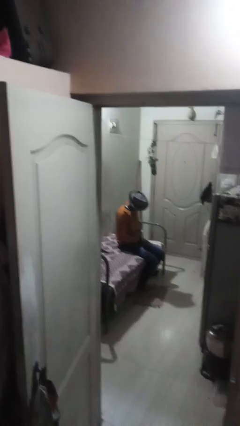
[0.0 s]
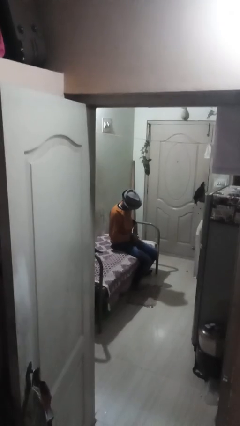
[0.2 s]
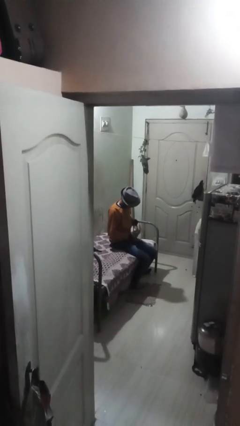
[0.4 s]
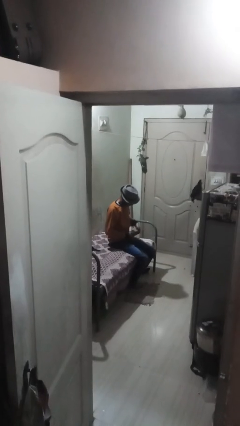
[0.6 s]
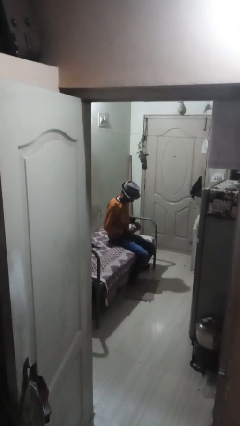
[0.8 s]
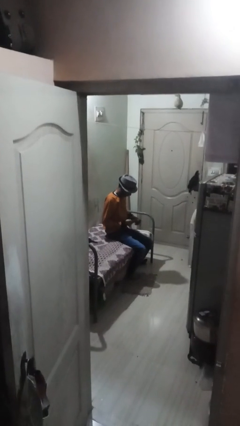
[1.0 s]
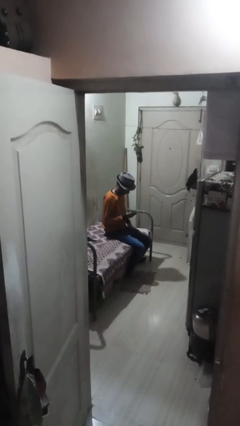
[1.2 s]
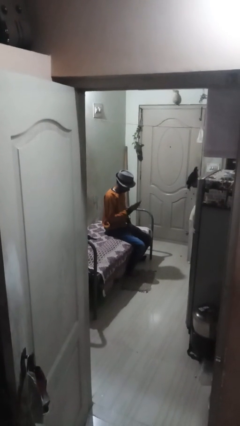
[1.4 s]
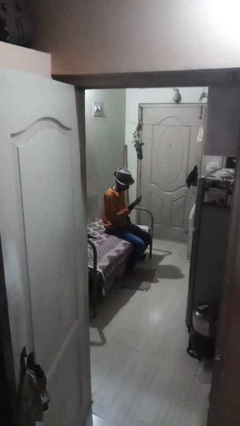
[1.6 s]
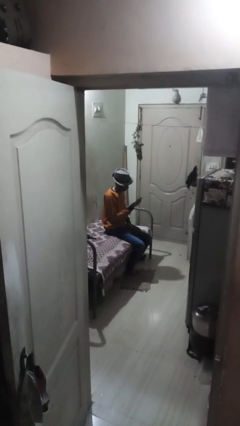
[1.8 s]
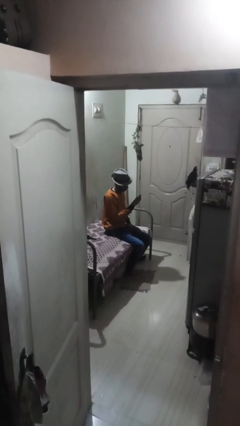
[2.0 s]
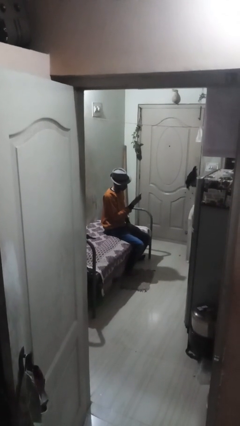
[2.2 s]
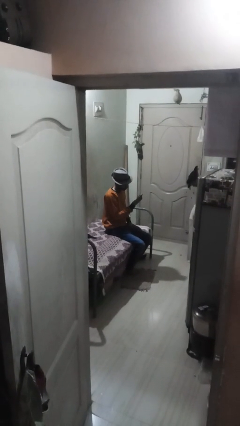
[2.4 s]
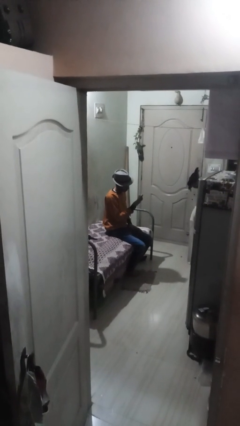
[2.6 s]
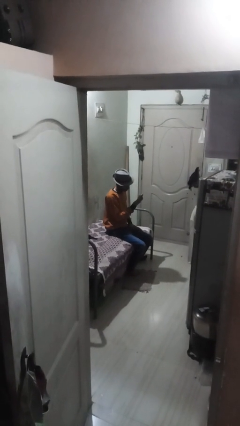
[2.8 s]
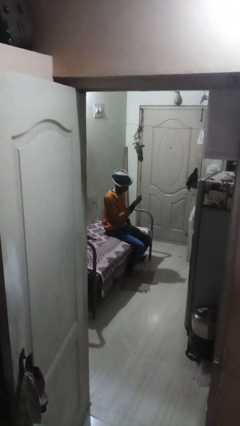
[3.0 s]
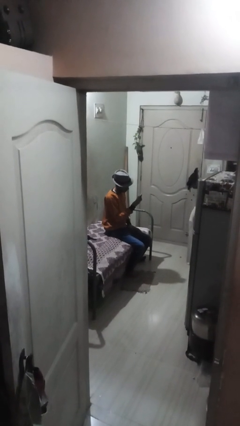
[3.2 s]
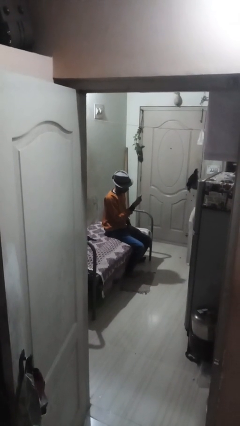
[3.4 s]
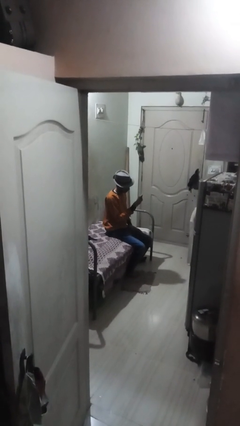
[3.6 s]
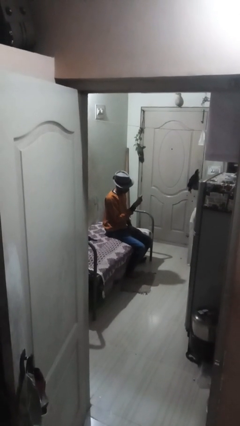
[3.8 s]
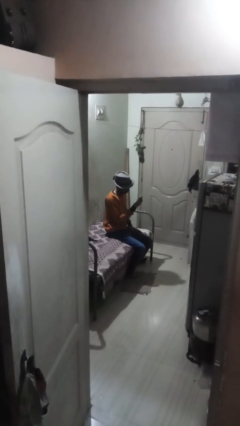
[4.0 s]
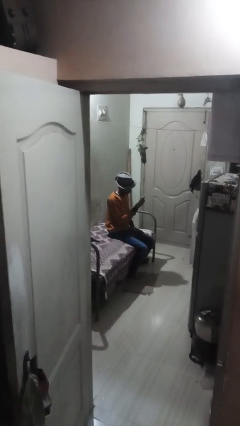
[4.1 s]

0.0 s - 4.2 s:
person takes phone from pocket

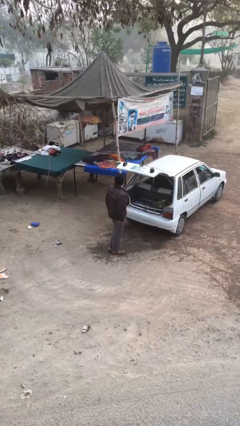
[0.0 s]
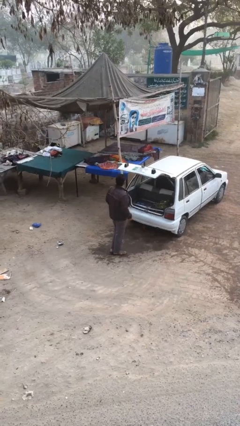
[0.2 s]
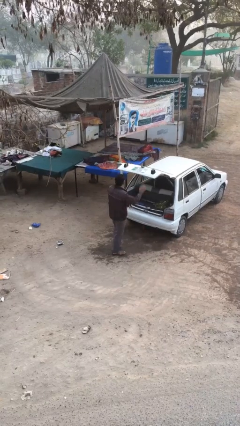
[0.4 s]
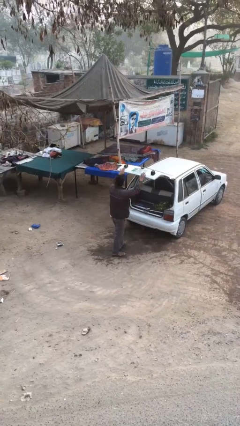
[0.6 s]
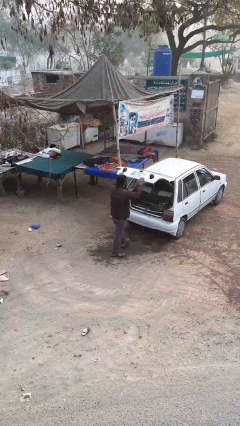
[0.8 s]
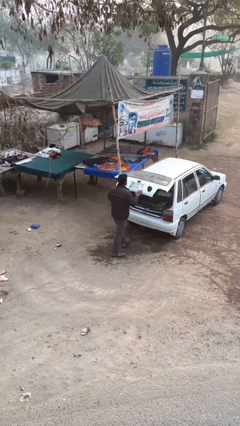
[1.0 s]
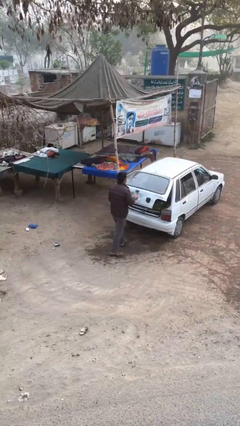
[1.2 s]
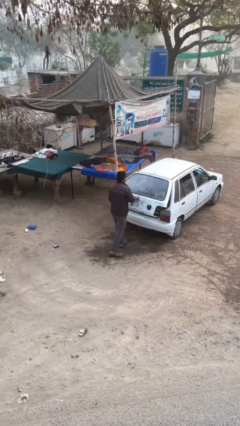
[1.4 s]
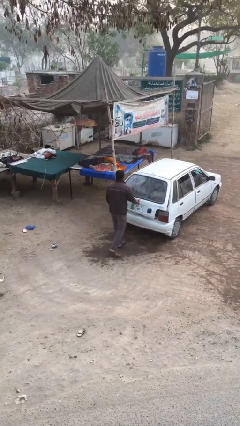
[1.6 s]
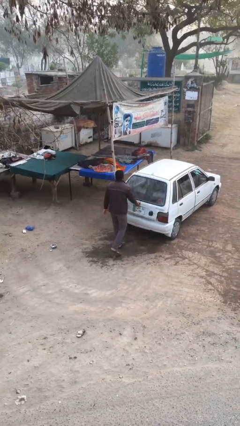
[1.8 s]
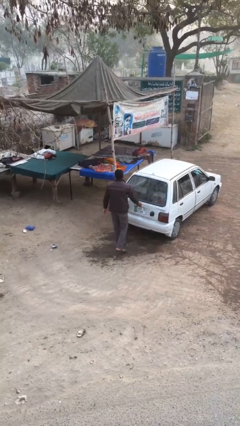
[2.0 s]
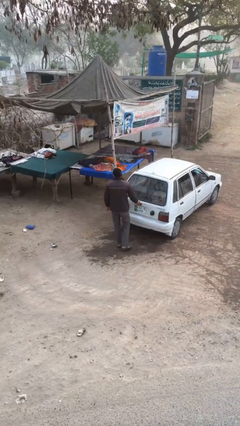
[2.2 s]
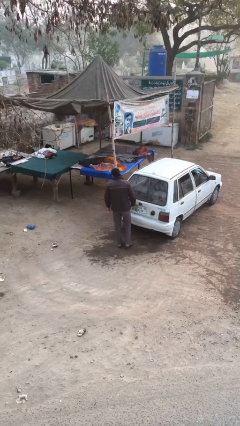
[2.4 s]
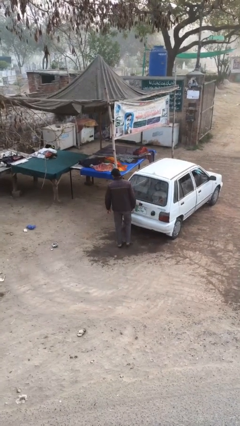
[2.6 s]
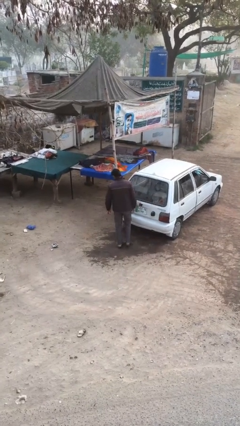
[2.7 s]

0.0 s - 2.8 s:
person closes car trunk

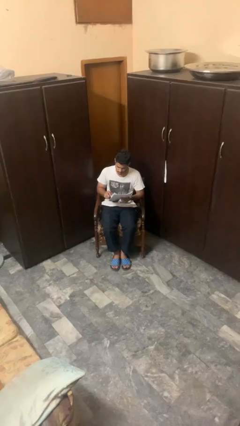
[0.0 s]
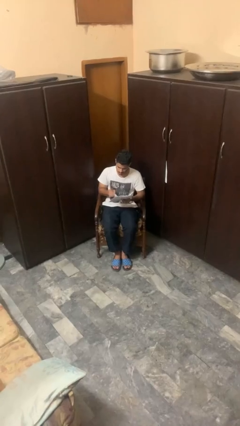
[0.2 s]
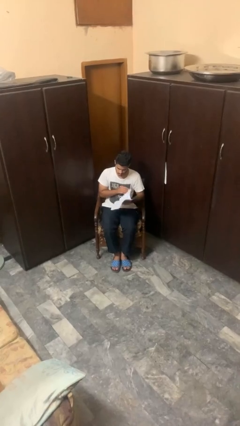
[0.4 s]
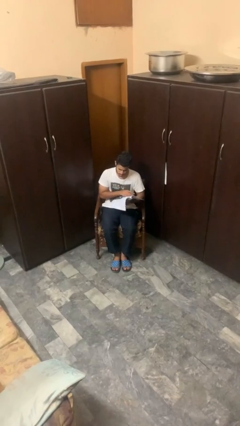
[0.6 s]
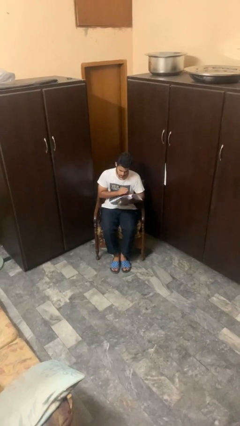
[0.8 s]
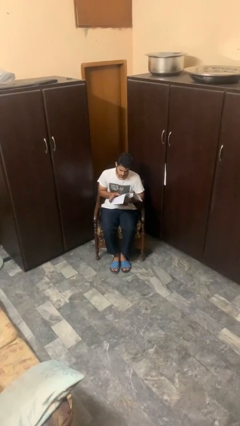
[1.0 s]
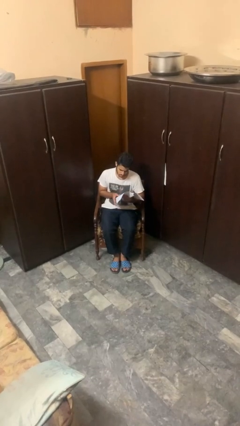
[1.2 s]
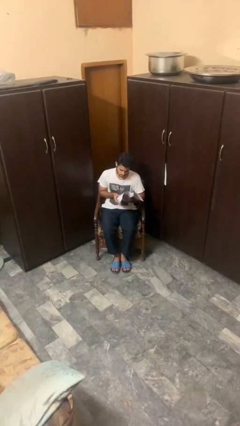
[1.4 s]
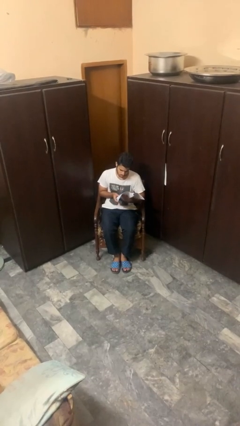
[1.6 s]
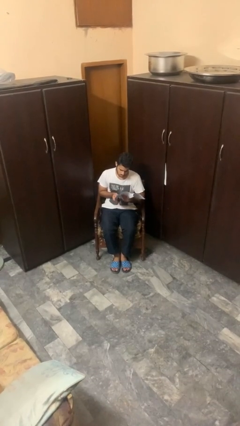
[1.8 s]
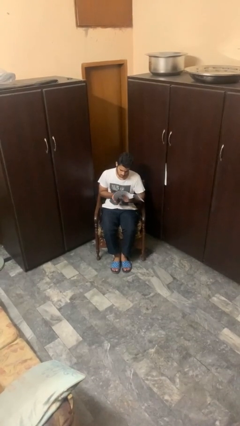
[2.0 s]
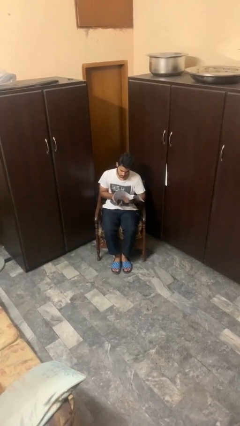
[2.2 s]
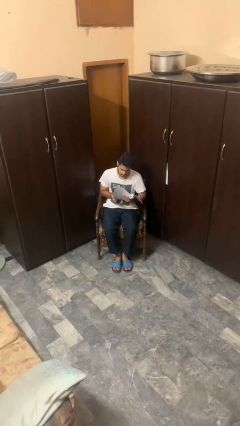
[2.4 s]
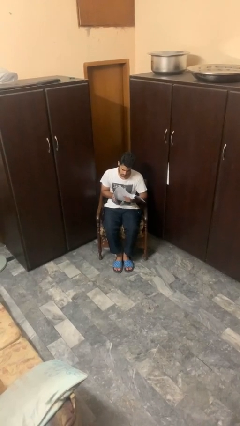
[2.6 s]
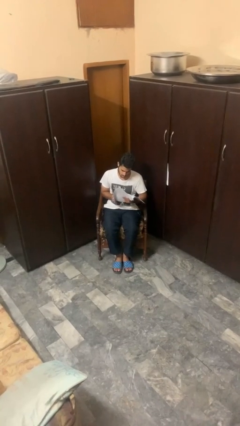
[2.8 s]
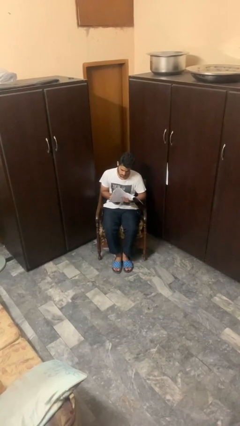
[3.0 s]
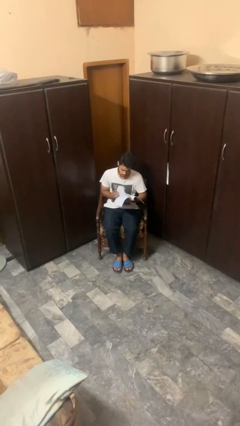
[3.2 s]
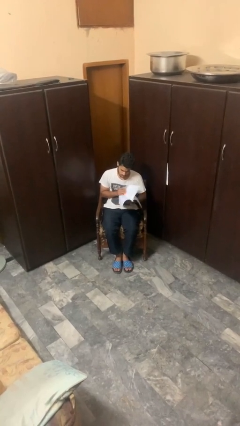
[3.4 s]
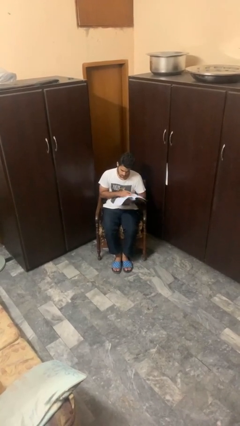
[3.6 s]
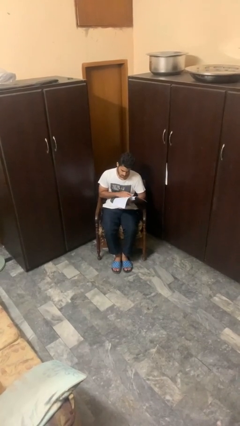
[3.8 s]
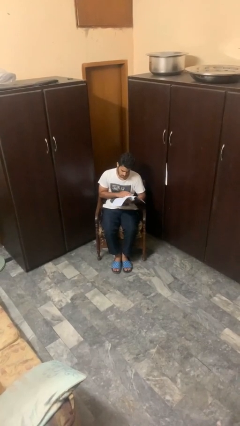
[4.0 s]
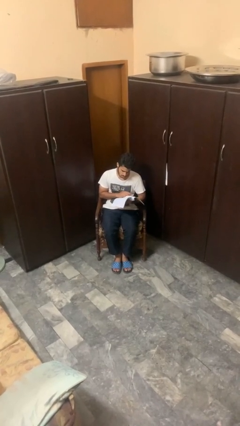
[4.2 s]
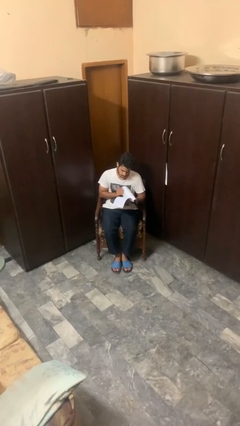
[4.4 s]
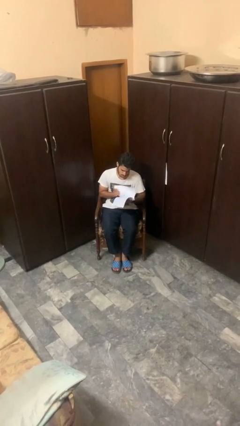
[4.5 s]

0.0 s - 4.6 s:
person reads magazine

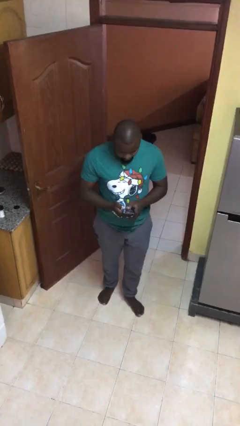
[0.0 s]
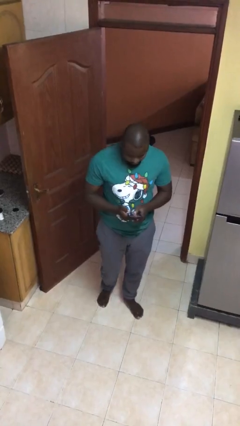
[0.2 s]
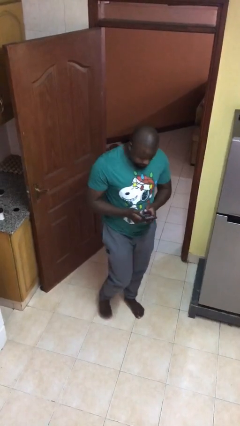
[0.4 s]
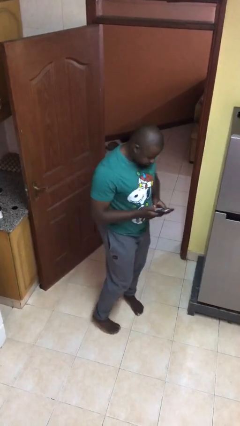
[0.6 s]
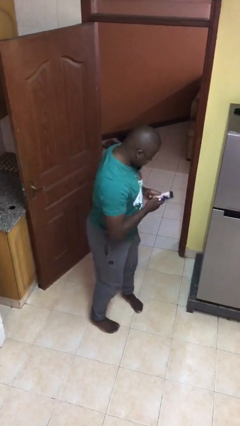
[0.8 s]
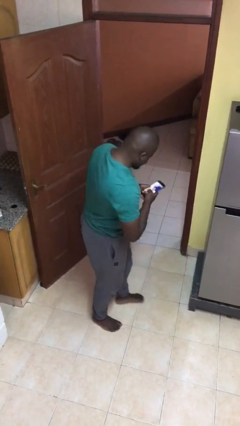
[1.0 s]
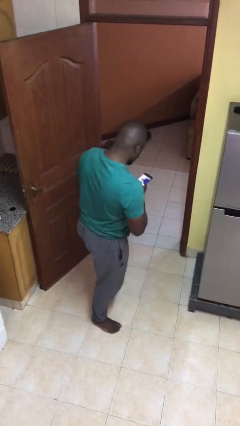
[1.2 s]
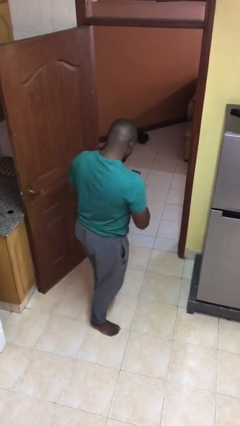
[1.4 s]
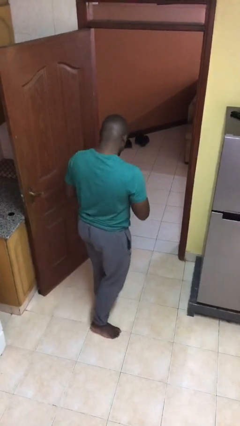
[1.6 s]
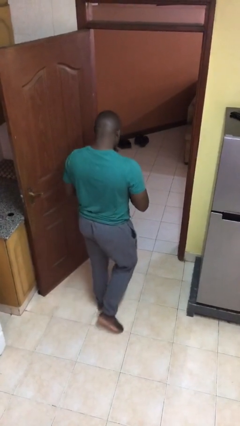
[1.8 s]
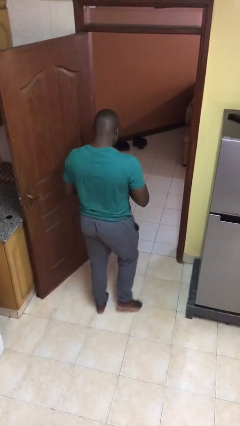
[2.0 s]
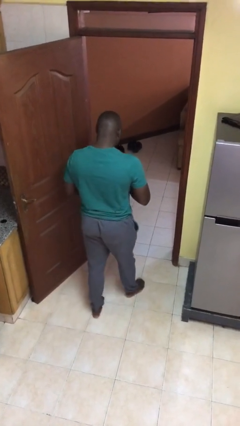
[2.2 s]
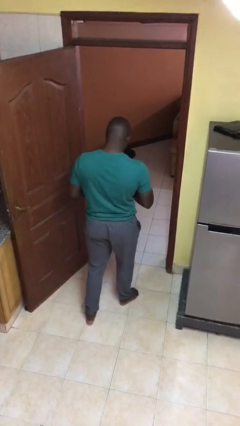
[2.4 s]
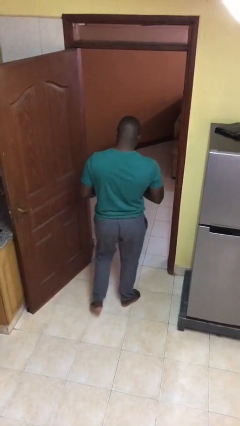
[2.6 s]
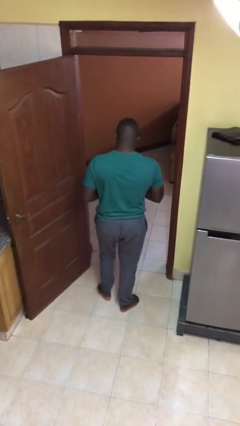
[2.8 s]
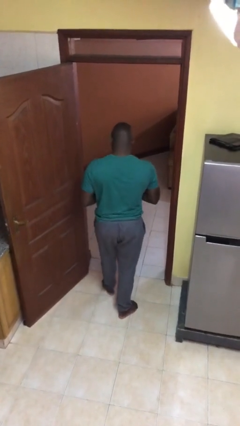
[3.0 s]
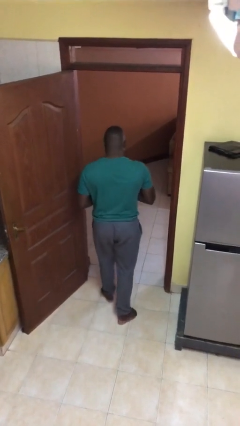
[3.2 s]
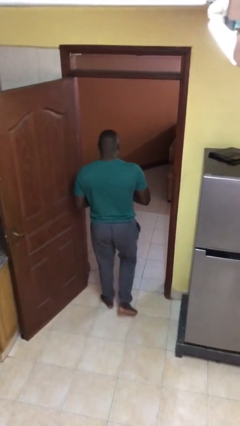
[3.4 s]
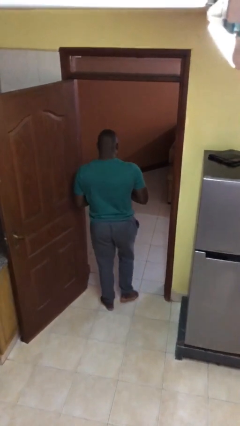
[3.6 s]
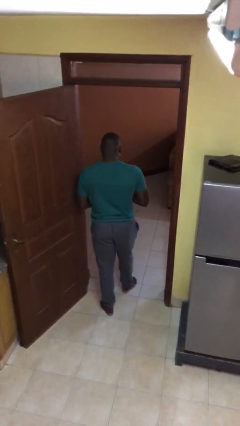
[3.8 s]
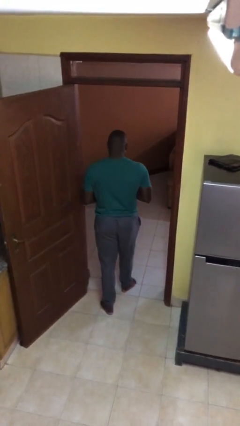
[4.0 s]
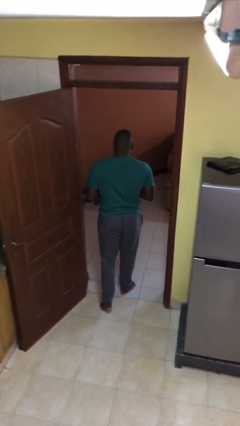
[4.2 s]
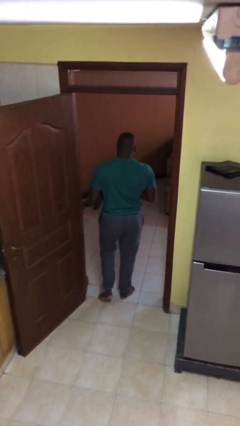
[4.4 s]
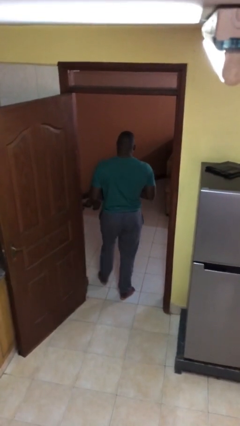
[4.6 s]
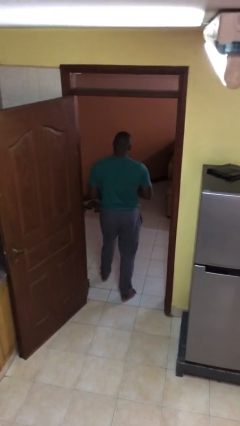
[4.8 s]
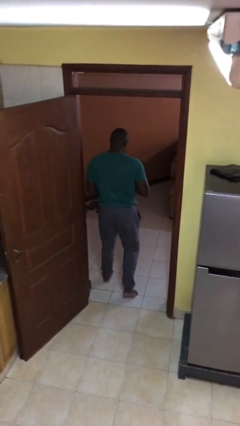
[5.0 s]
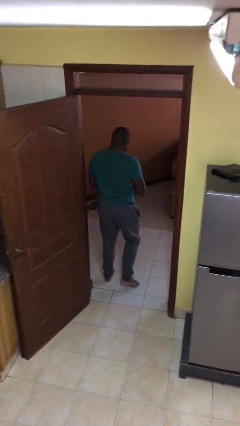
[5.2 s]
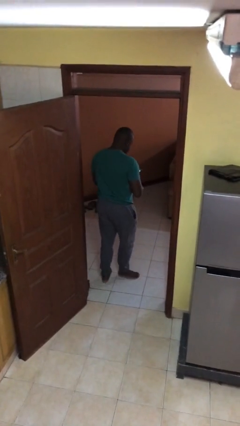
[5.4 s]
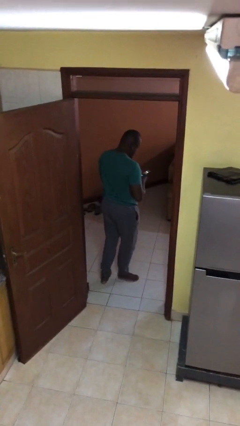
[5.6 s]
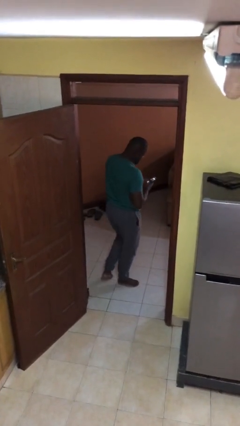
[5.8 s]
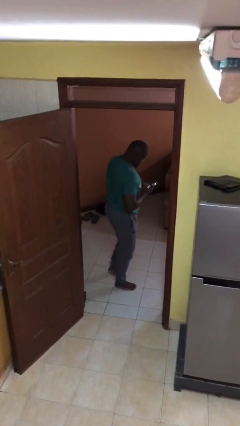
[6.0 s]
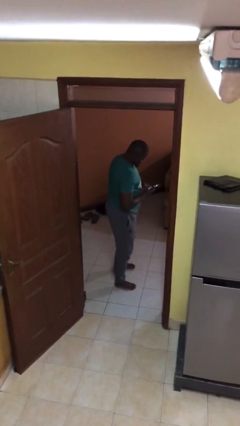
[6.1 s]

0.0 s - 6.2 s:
person exits scene through structure

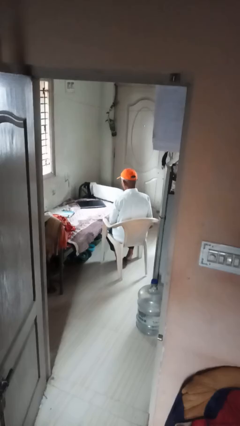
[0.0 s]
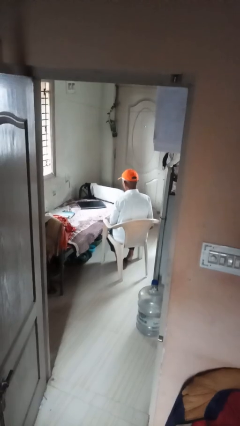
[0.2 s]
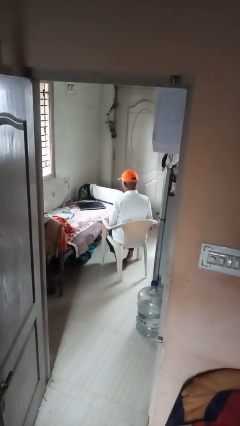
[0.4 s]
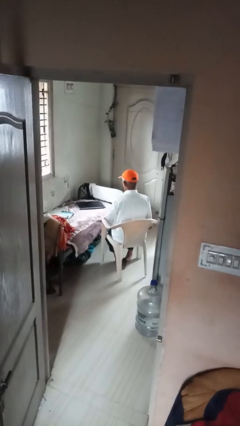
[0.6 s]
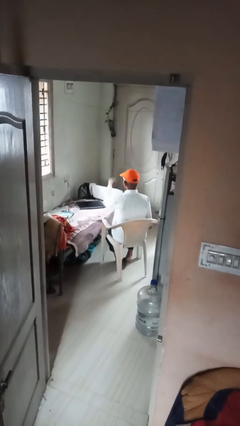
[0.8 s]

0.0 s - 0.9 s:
person looks at wristwatch
